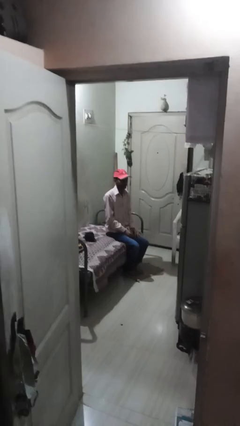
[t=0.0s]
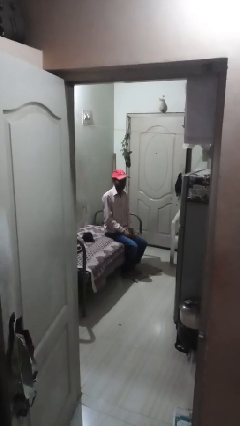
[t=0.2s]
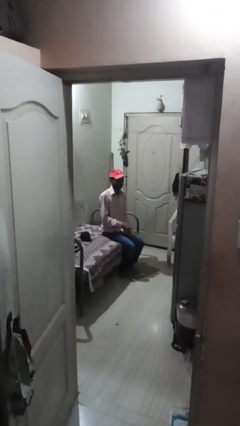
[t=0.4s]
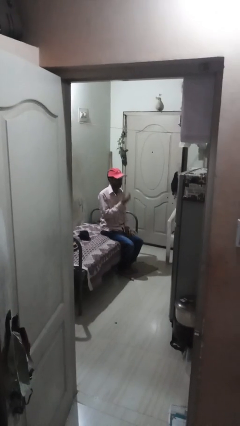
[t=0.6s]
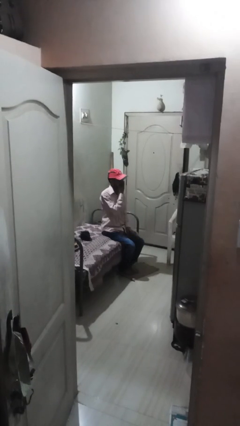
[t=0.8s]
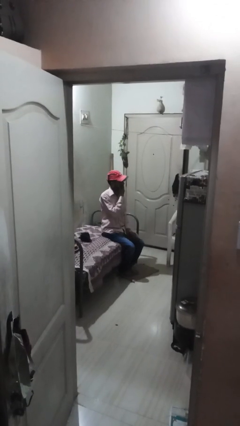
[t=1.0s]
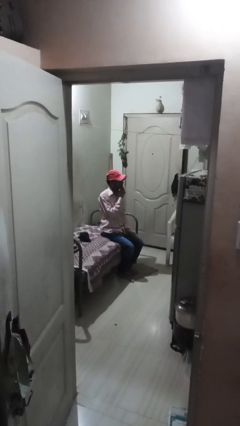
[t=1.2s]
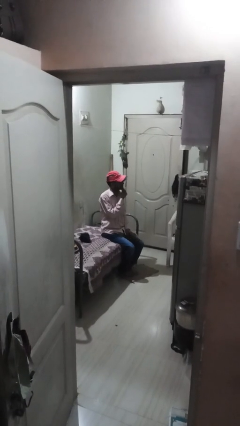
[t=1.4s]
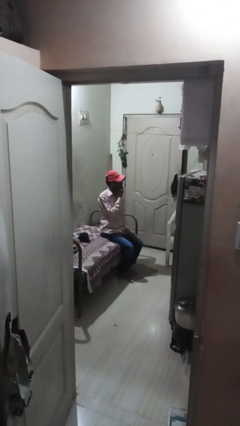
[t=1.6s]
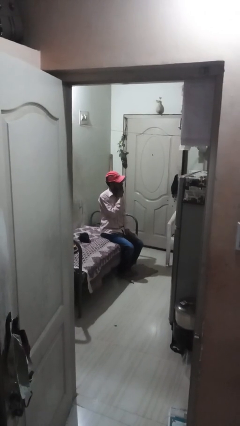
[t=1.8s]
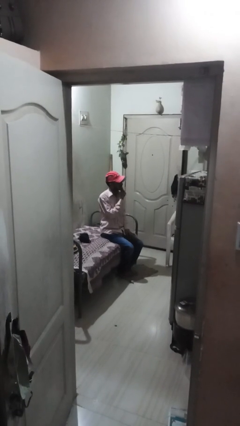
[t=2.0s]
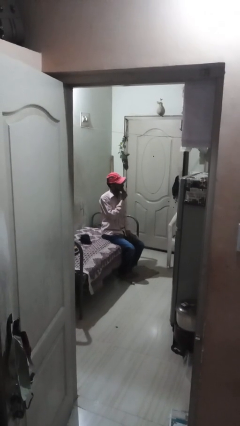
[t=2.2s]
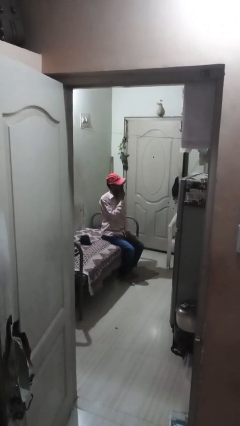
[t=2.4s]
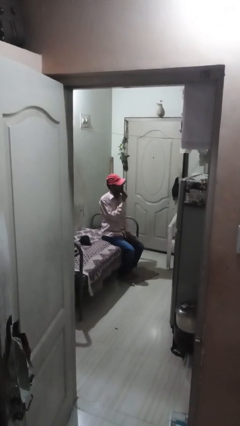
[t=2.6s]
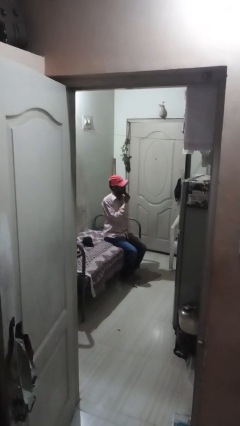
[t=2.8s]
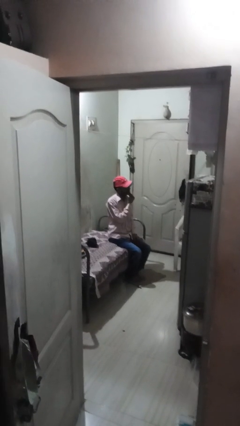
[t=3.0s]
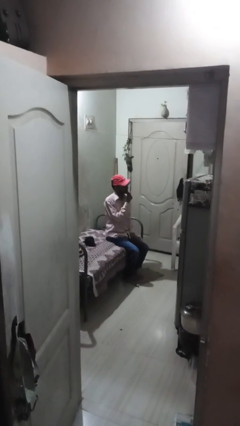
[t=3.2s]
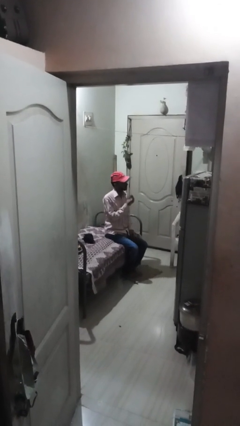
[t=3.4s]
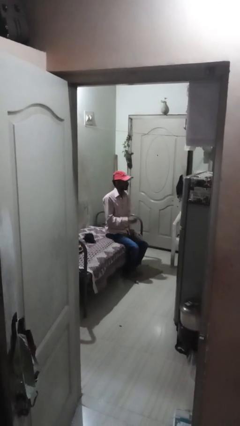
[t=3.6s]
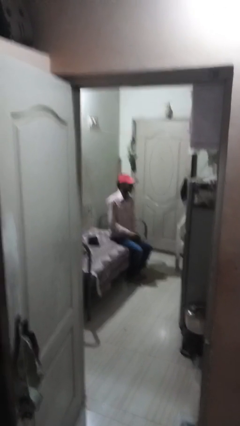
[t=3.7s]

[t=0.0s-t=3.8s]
person strokes chin

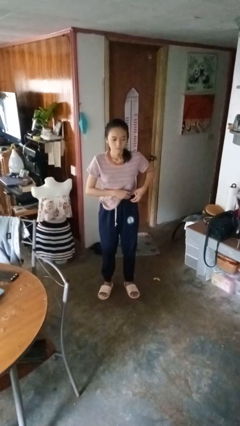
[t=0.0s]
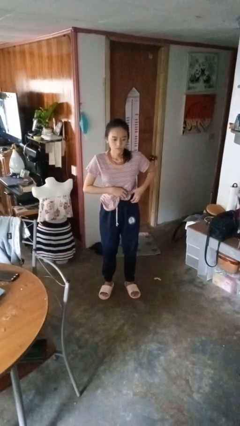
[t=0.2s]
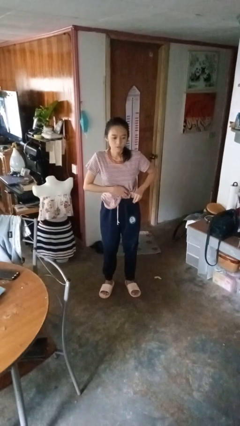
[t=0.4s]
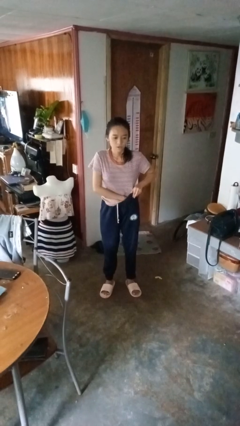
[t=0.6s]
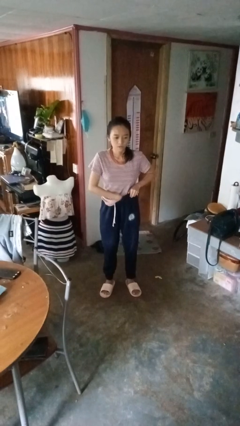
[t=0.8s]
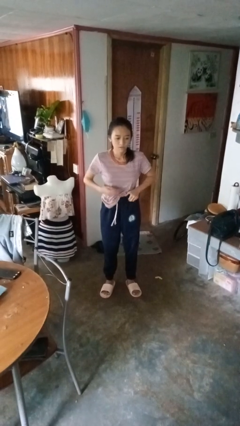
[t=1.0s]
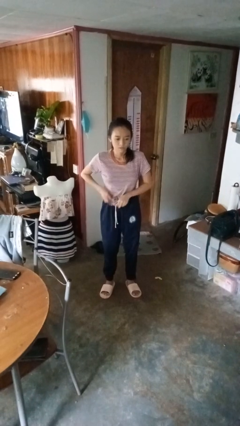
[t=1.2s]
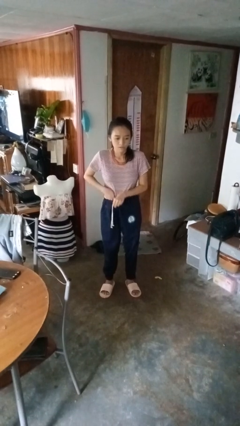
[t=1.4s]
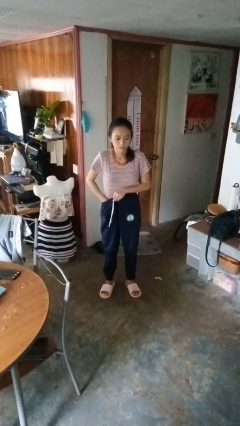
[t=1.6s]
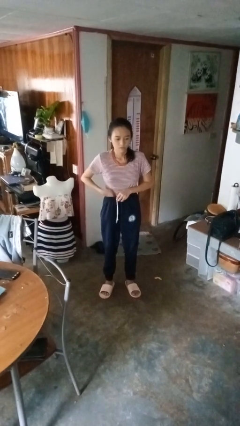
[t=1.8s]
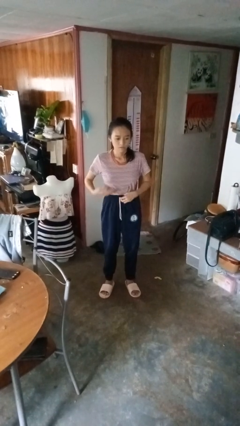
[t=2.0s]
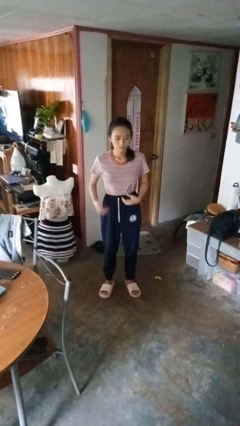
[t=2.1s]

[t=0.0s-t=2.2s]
person tucks in shirt

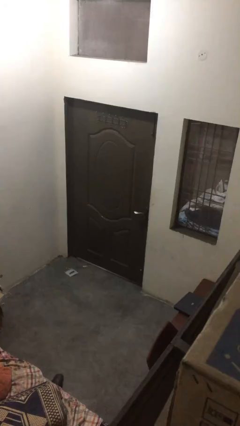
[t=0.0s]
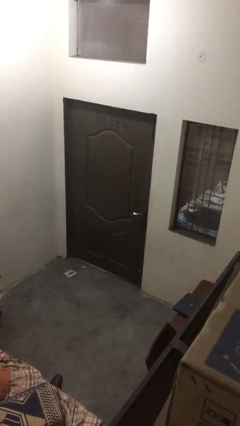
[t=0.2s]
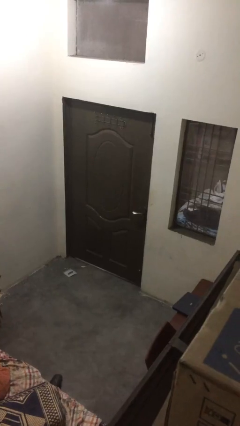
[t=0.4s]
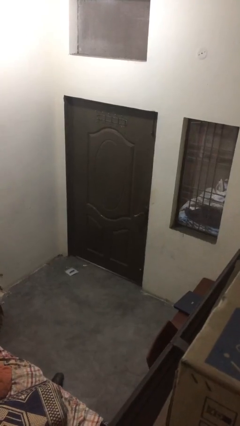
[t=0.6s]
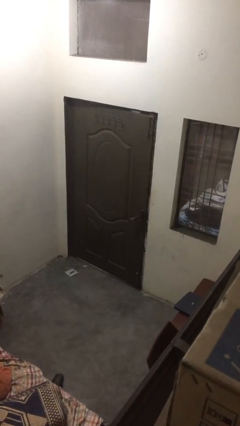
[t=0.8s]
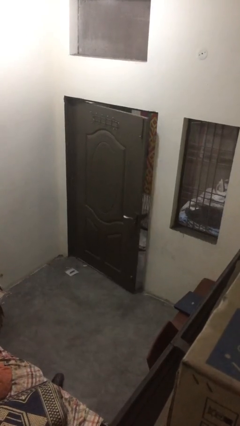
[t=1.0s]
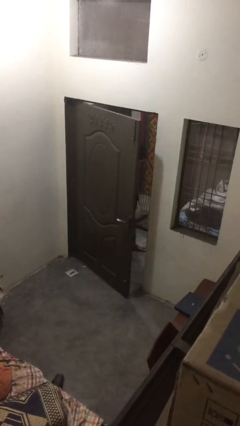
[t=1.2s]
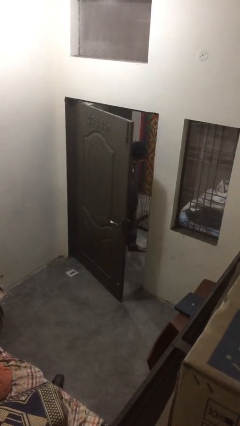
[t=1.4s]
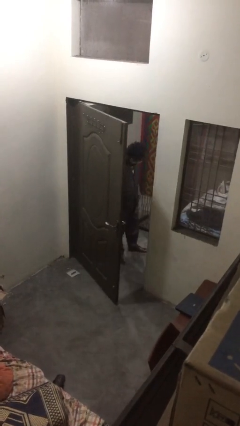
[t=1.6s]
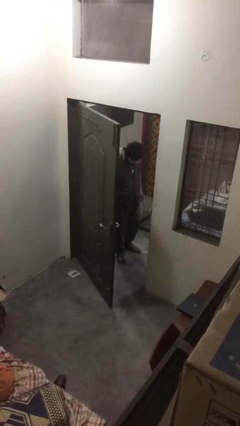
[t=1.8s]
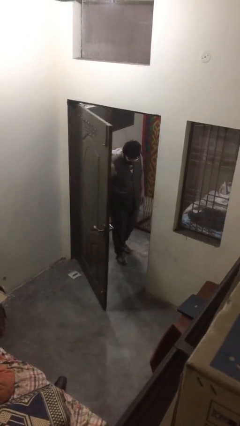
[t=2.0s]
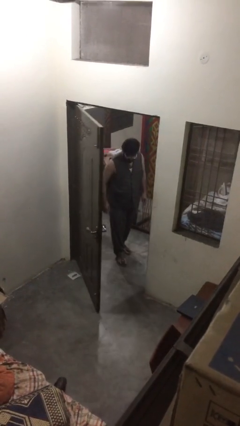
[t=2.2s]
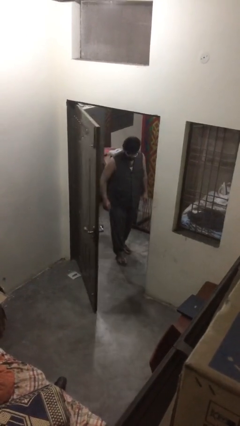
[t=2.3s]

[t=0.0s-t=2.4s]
person opens facility door

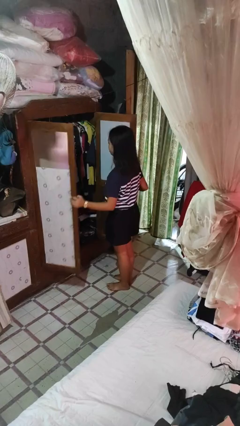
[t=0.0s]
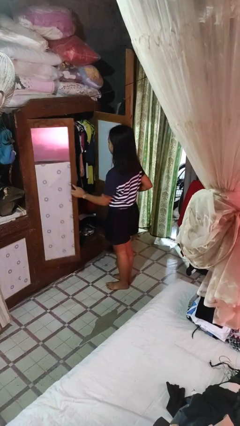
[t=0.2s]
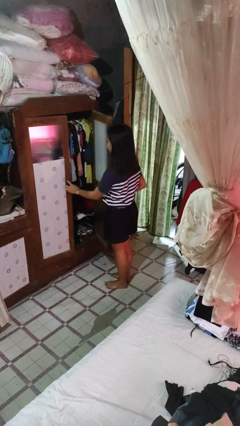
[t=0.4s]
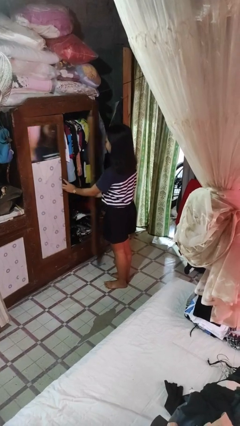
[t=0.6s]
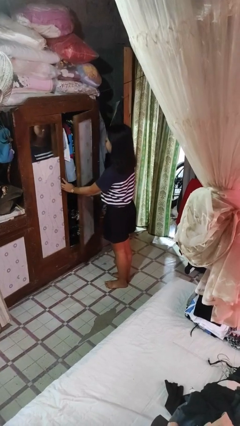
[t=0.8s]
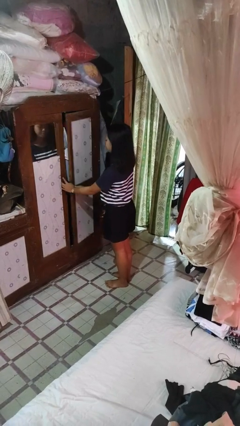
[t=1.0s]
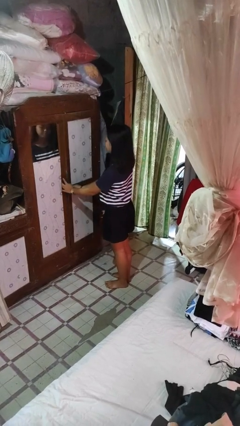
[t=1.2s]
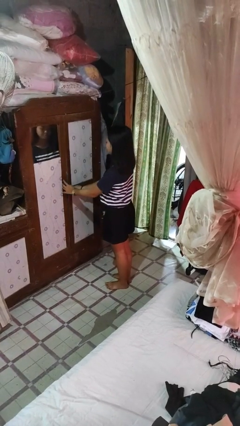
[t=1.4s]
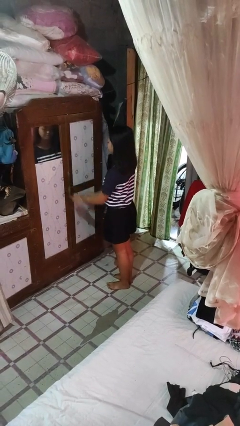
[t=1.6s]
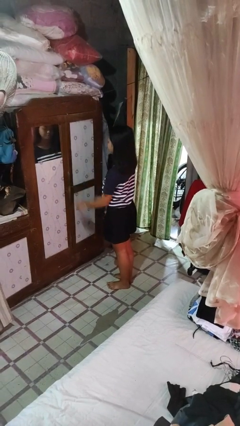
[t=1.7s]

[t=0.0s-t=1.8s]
person closes closet door

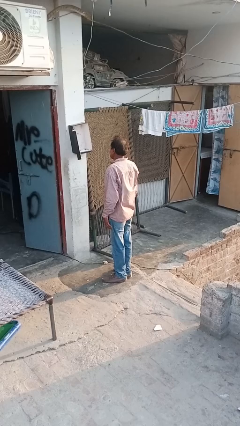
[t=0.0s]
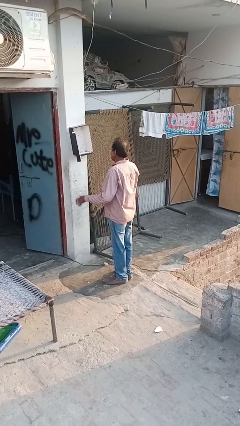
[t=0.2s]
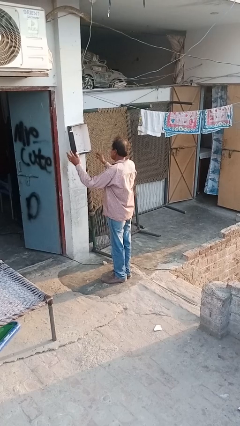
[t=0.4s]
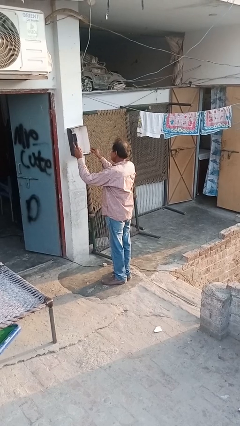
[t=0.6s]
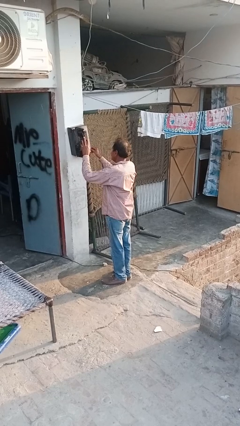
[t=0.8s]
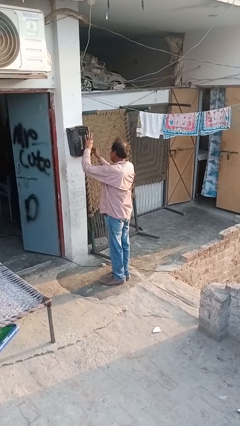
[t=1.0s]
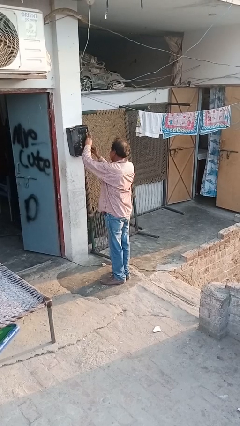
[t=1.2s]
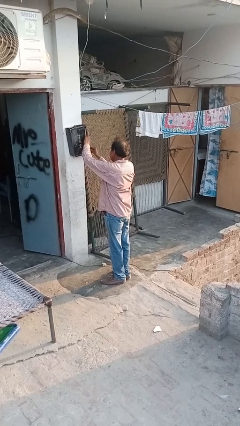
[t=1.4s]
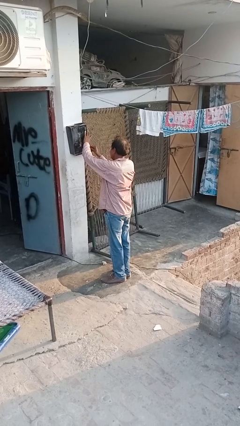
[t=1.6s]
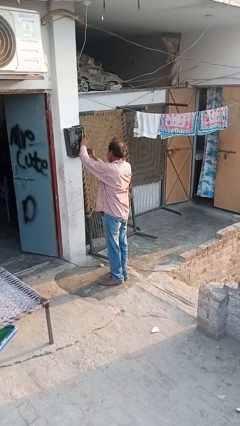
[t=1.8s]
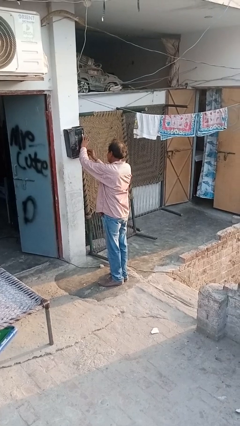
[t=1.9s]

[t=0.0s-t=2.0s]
person closes mailbox

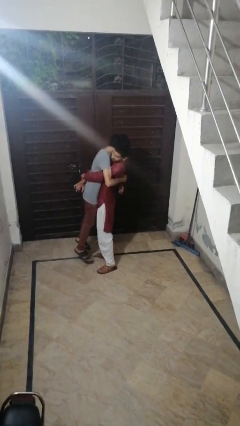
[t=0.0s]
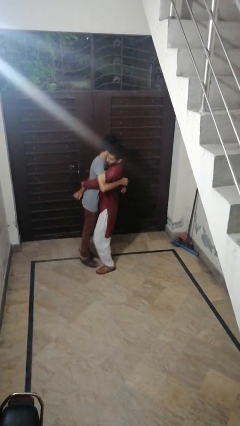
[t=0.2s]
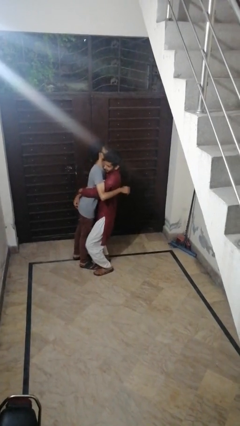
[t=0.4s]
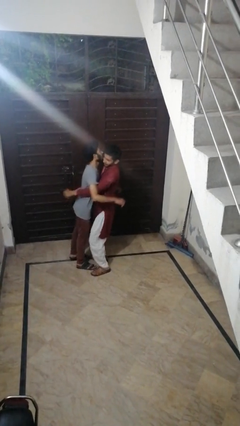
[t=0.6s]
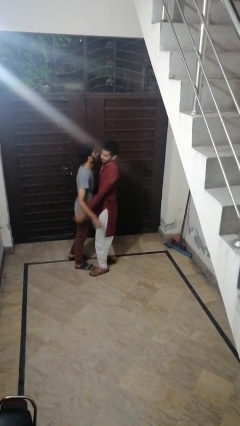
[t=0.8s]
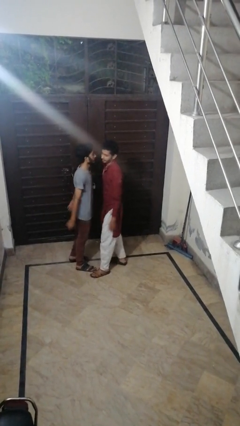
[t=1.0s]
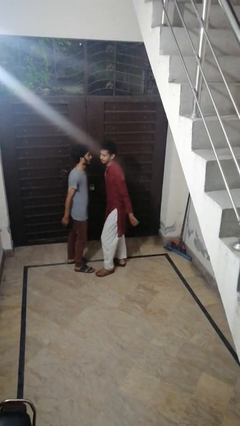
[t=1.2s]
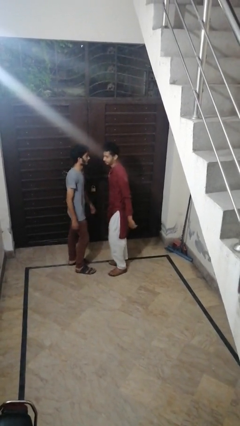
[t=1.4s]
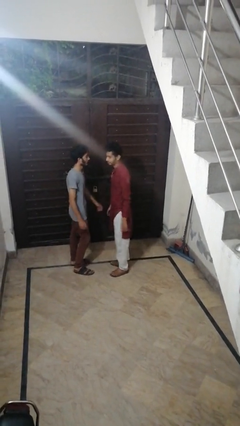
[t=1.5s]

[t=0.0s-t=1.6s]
person puts down person

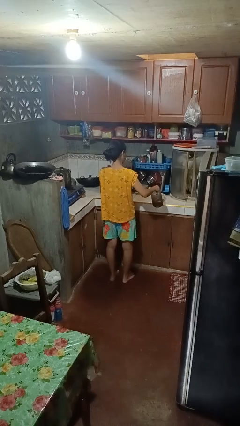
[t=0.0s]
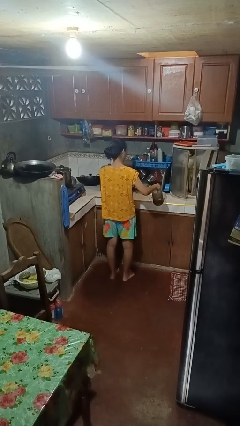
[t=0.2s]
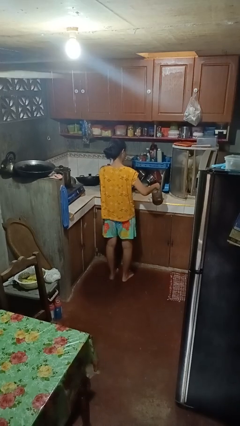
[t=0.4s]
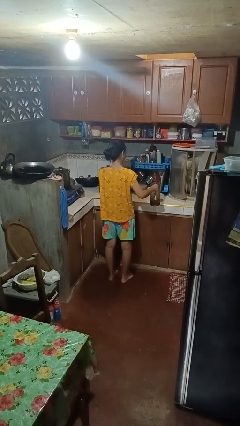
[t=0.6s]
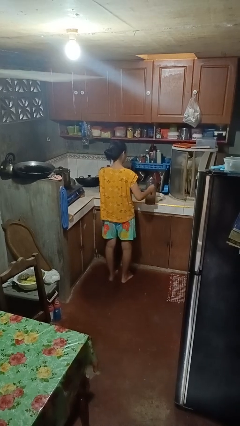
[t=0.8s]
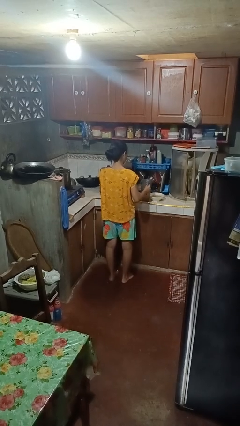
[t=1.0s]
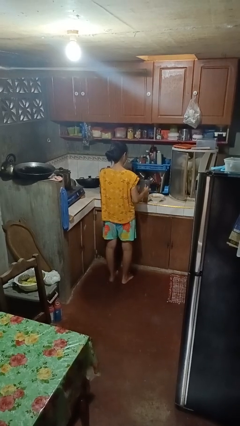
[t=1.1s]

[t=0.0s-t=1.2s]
person pours into bowl

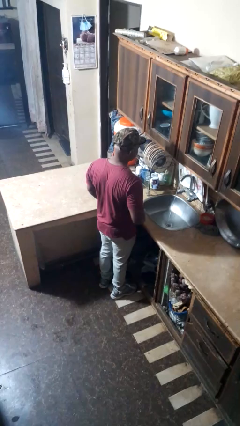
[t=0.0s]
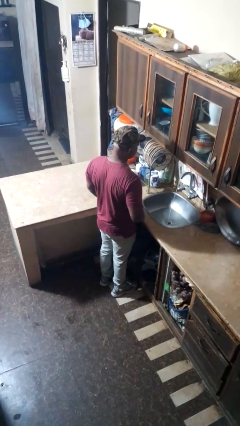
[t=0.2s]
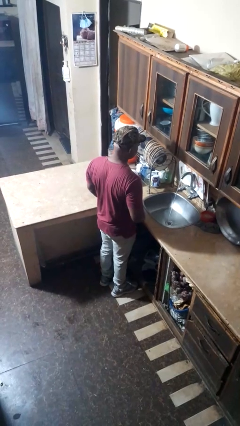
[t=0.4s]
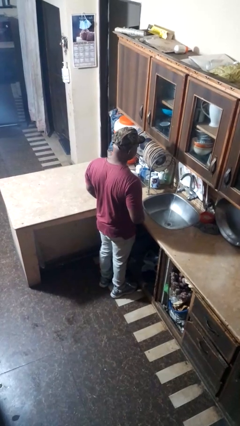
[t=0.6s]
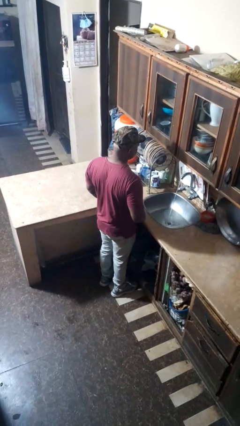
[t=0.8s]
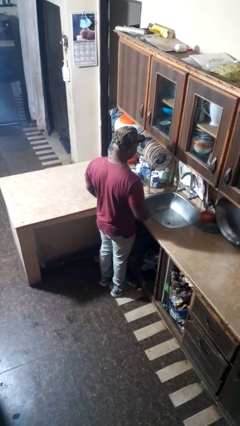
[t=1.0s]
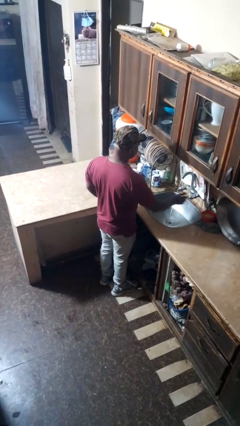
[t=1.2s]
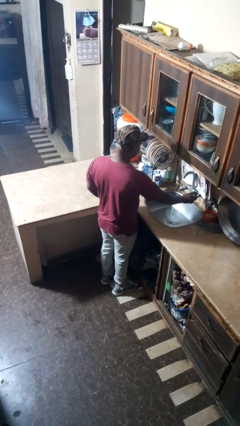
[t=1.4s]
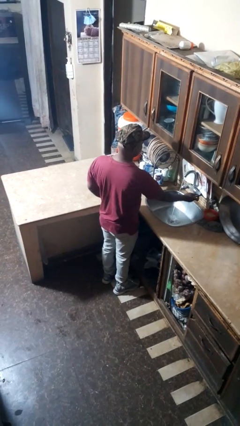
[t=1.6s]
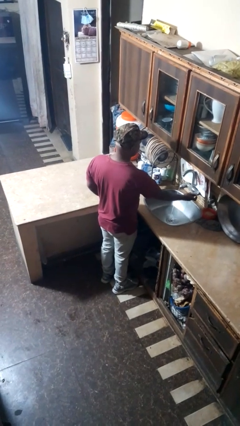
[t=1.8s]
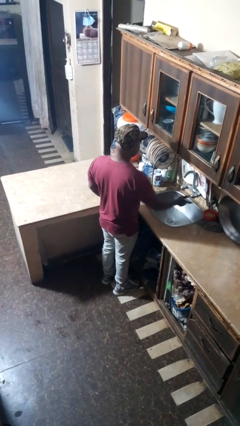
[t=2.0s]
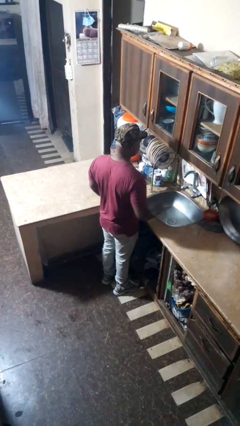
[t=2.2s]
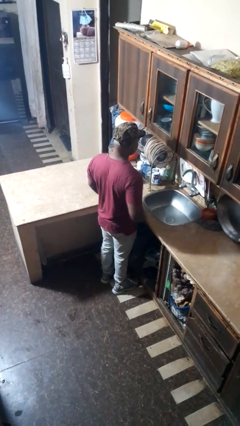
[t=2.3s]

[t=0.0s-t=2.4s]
person turns off faucet
